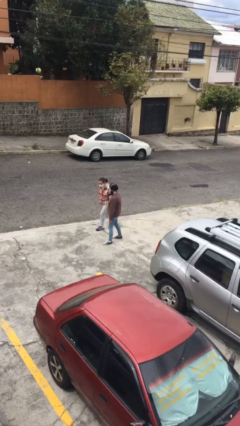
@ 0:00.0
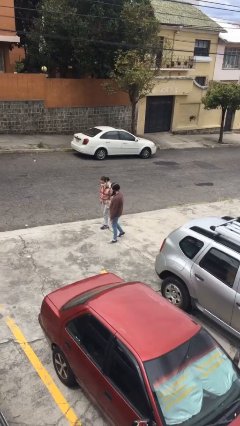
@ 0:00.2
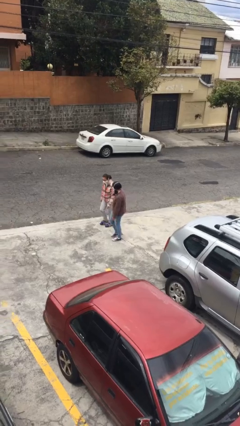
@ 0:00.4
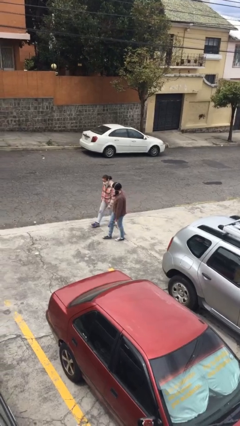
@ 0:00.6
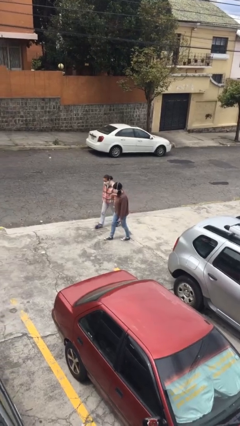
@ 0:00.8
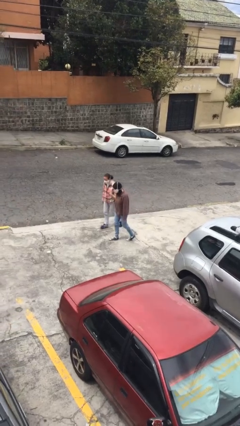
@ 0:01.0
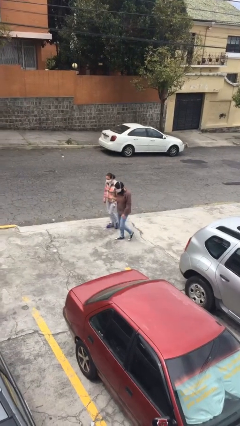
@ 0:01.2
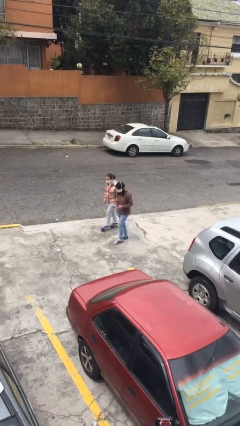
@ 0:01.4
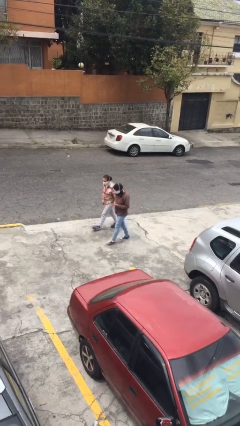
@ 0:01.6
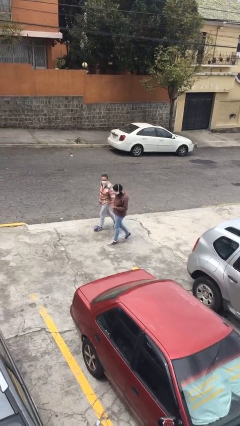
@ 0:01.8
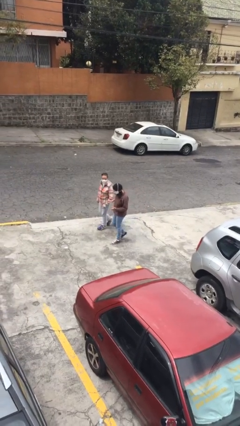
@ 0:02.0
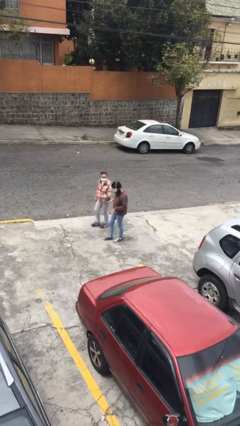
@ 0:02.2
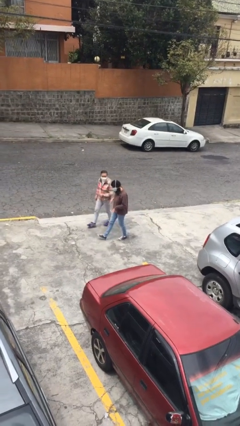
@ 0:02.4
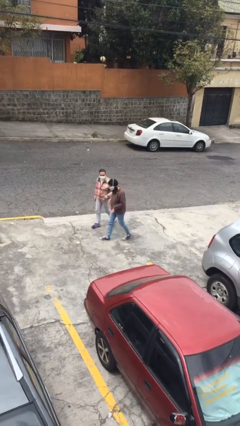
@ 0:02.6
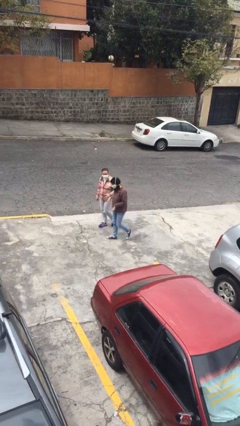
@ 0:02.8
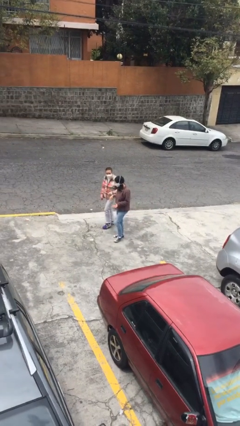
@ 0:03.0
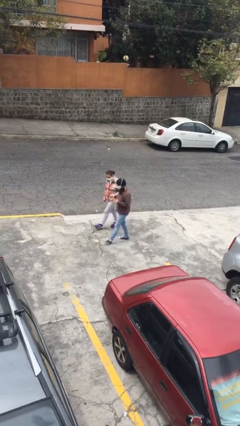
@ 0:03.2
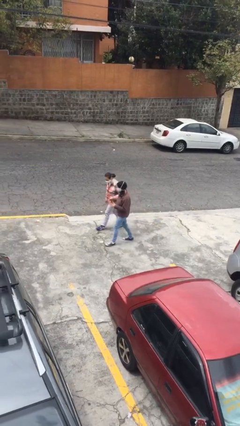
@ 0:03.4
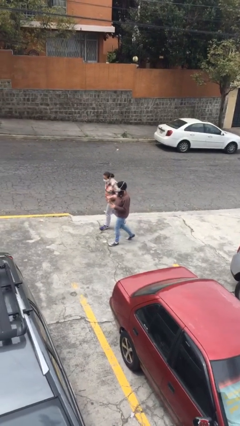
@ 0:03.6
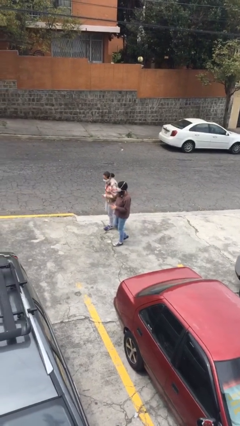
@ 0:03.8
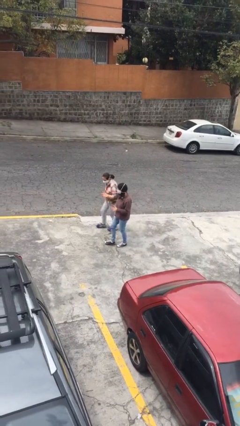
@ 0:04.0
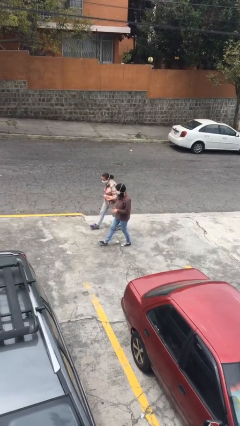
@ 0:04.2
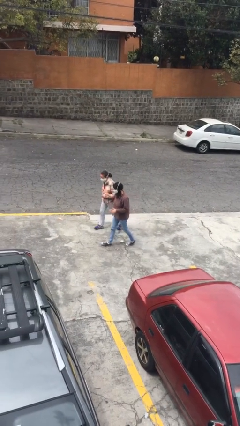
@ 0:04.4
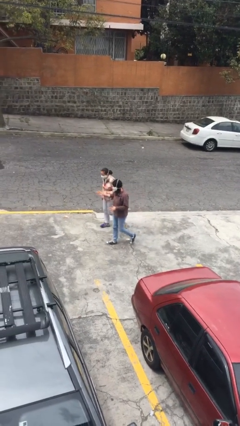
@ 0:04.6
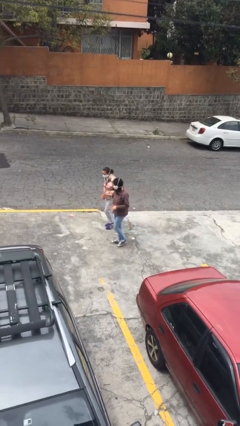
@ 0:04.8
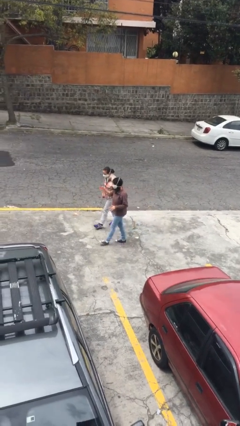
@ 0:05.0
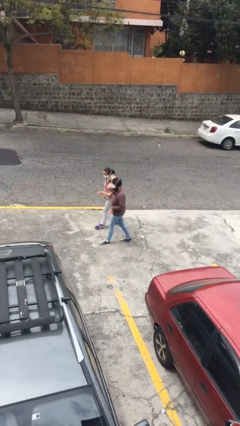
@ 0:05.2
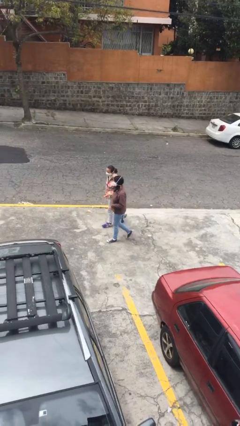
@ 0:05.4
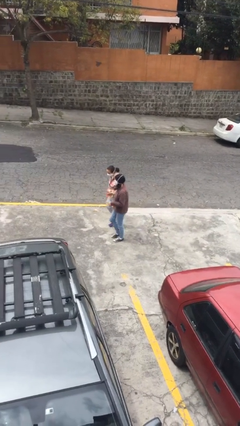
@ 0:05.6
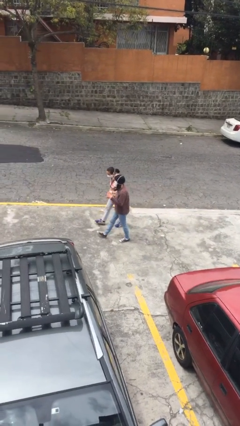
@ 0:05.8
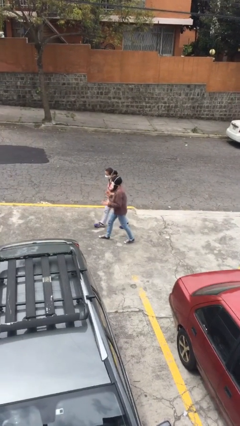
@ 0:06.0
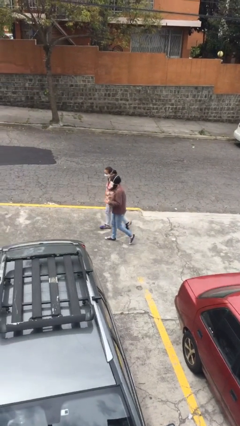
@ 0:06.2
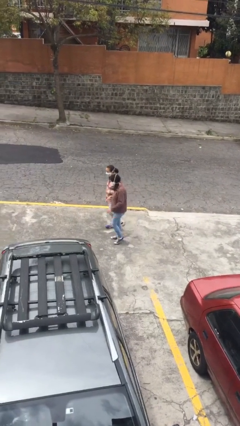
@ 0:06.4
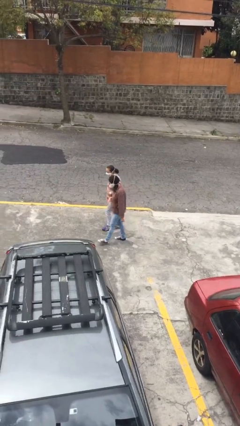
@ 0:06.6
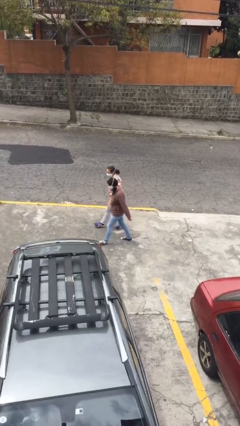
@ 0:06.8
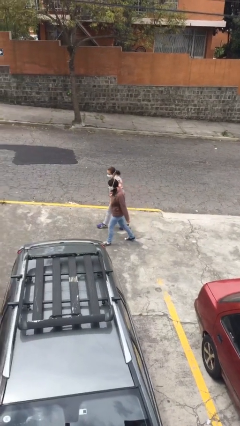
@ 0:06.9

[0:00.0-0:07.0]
person talks to person

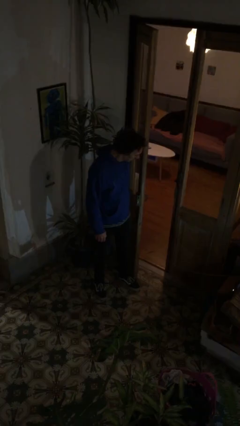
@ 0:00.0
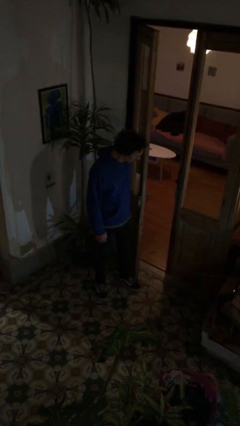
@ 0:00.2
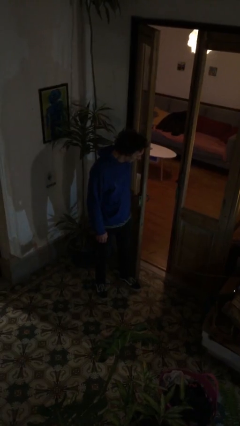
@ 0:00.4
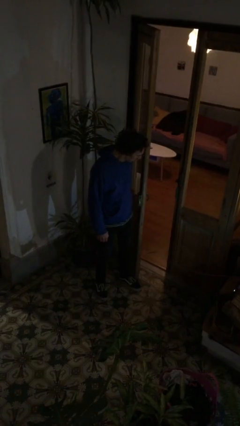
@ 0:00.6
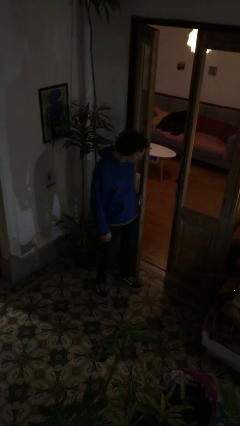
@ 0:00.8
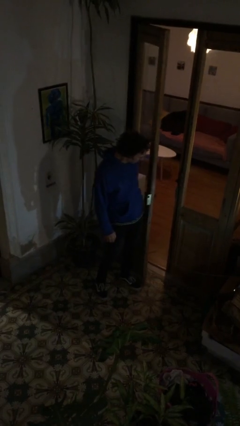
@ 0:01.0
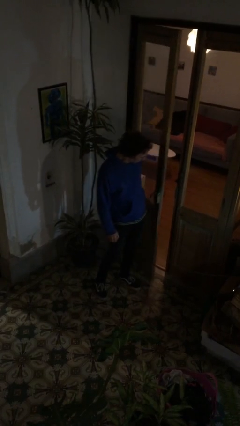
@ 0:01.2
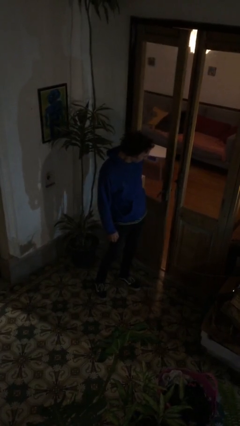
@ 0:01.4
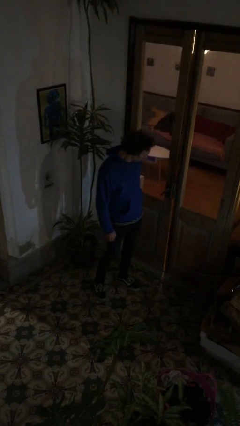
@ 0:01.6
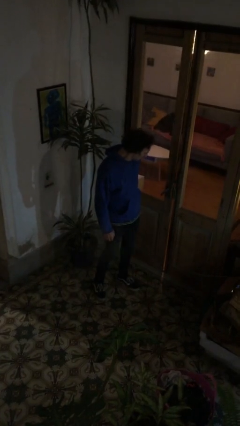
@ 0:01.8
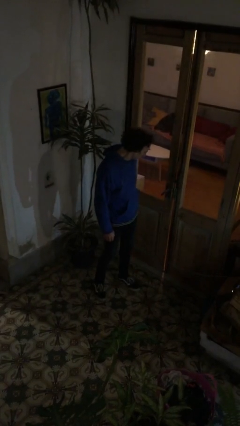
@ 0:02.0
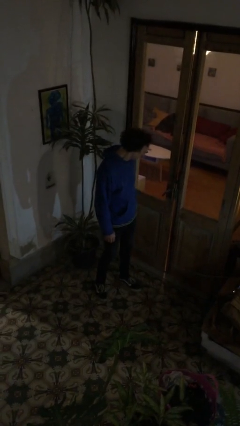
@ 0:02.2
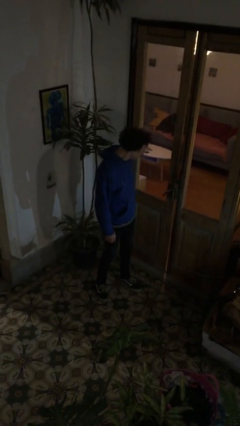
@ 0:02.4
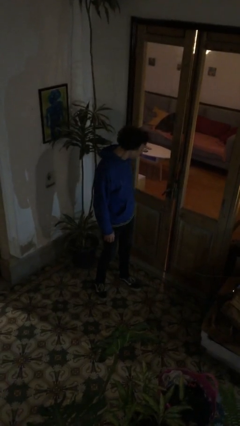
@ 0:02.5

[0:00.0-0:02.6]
person closes door with hip

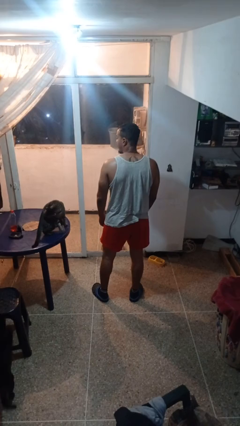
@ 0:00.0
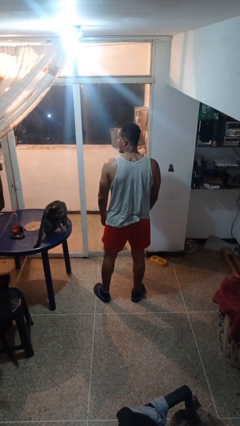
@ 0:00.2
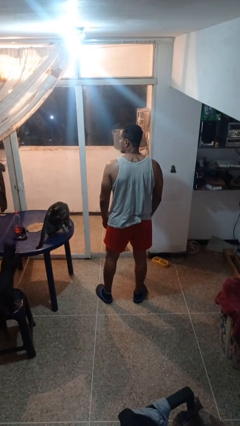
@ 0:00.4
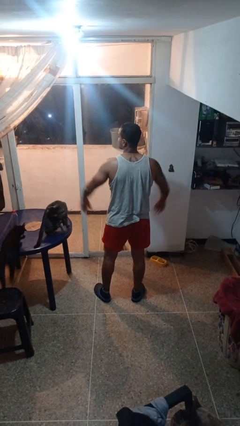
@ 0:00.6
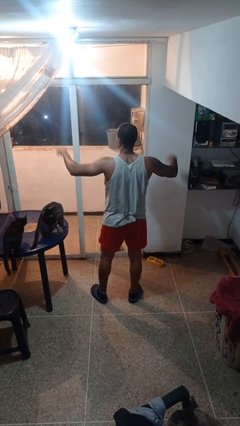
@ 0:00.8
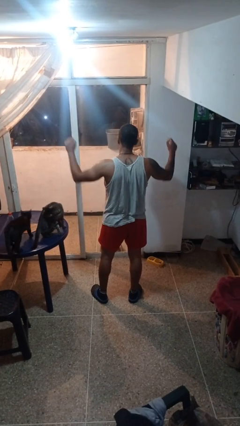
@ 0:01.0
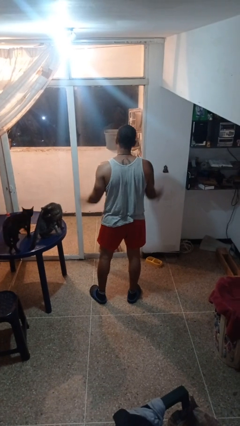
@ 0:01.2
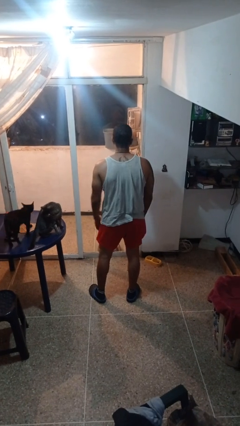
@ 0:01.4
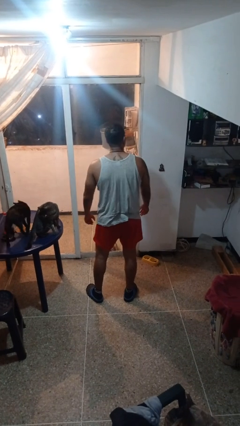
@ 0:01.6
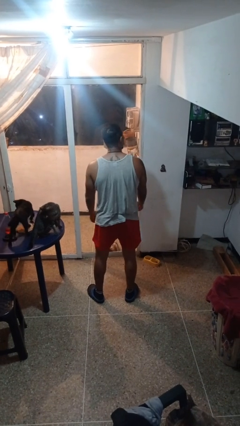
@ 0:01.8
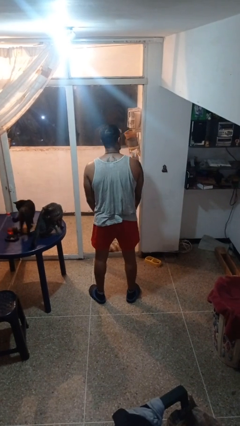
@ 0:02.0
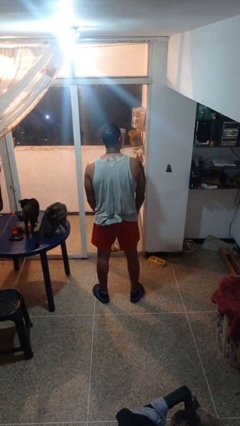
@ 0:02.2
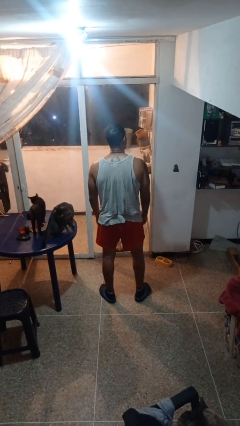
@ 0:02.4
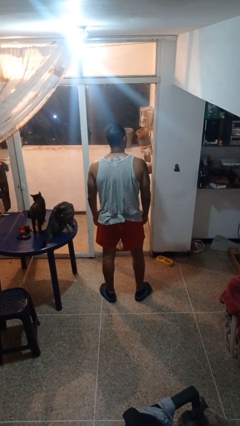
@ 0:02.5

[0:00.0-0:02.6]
person slaps hands on thighs

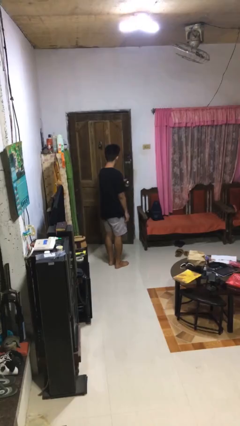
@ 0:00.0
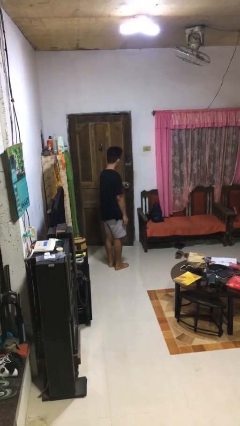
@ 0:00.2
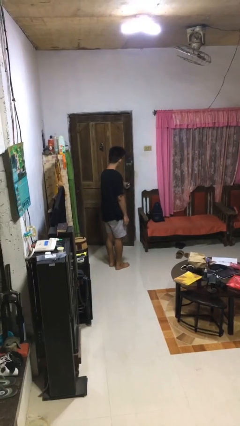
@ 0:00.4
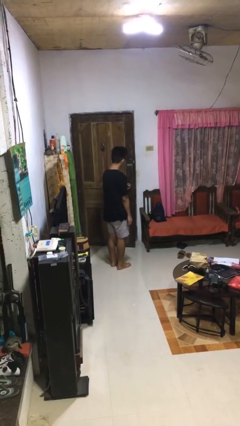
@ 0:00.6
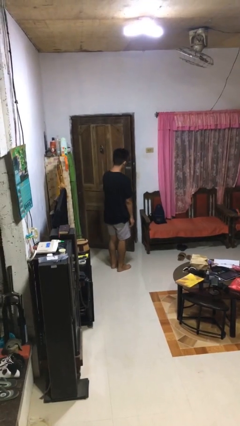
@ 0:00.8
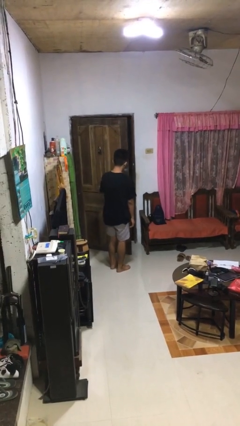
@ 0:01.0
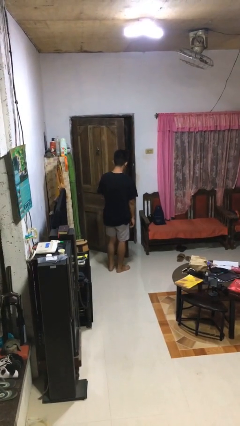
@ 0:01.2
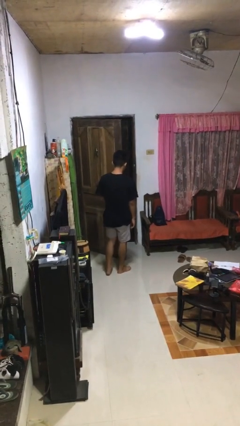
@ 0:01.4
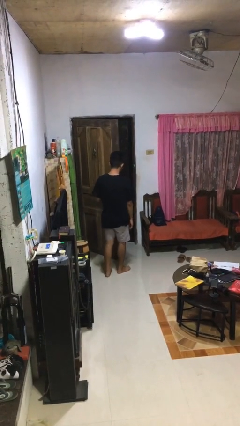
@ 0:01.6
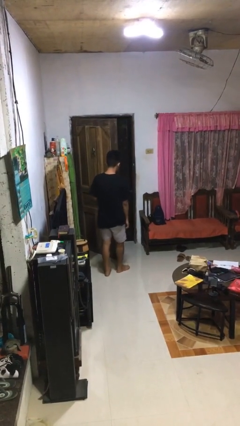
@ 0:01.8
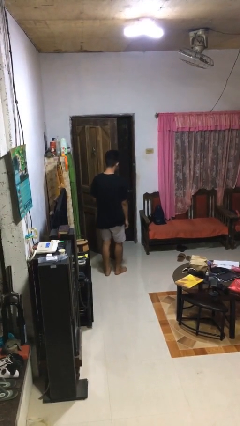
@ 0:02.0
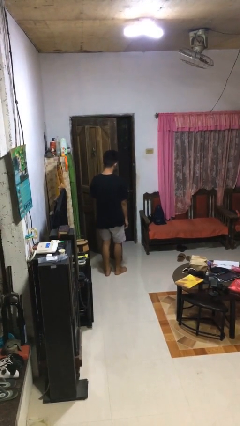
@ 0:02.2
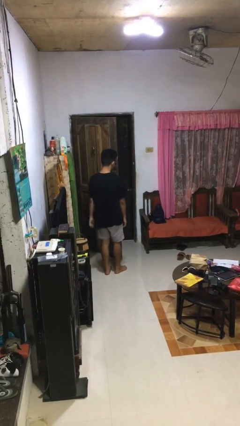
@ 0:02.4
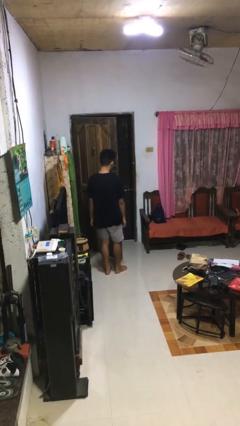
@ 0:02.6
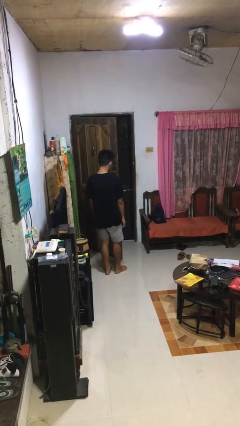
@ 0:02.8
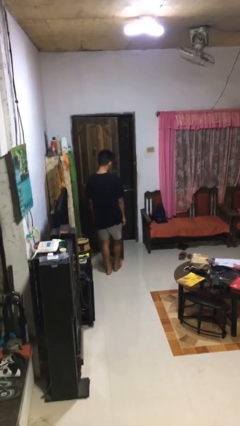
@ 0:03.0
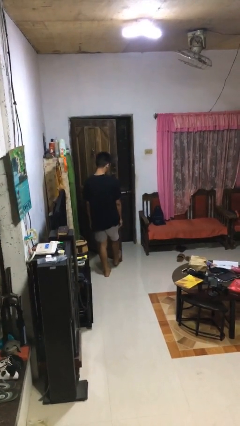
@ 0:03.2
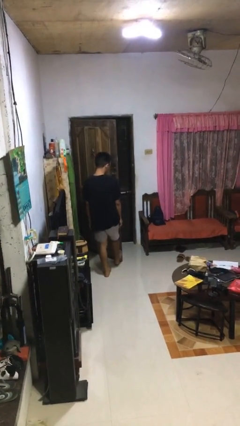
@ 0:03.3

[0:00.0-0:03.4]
person opens facility door

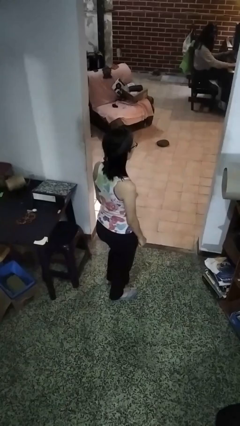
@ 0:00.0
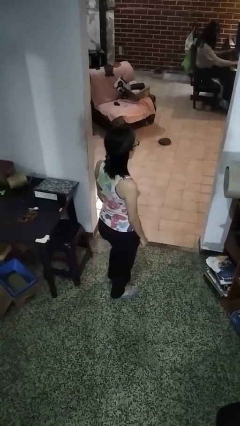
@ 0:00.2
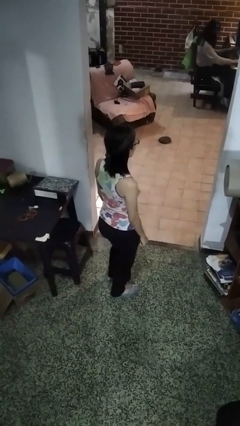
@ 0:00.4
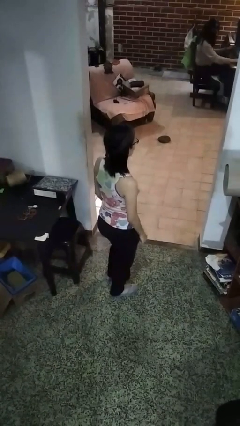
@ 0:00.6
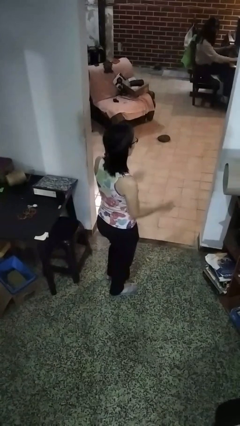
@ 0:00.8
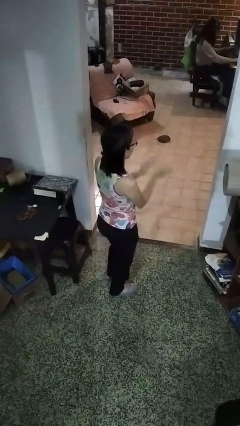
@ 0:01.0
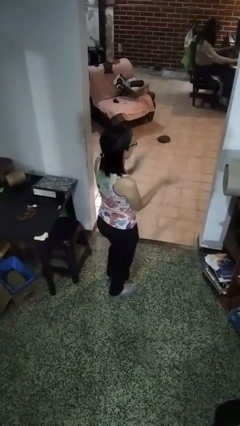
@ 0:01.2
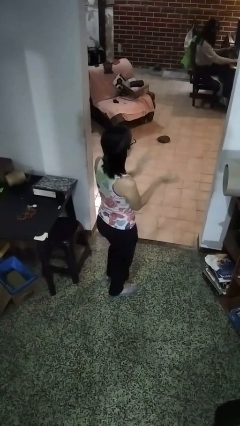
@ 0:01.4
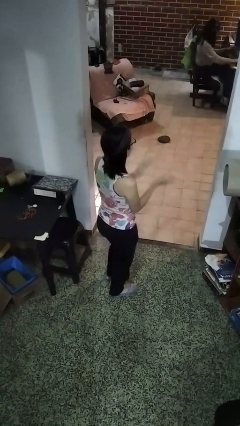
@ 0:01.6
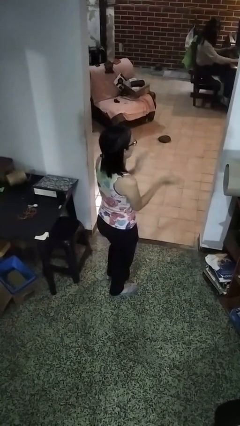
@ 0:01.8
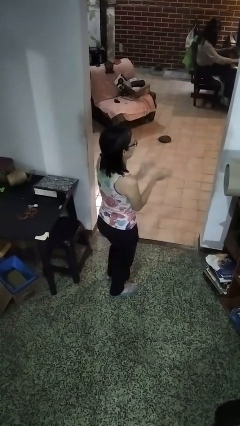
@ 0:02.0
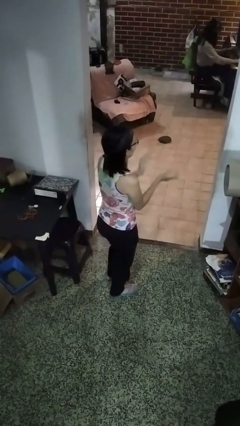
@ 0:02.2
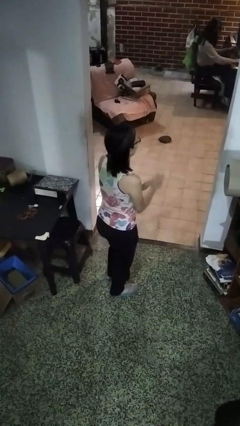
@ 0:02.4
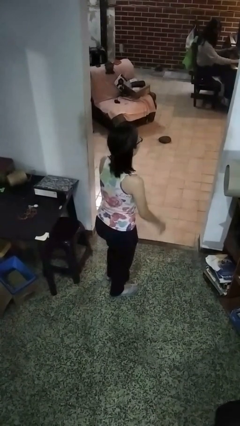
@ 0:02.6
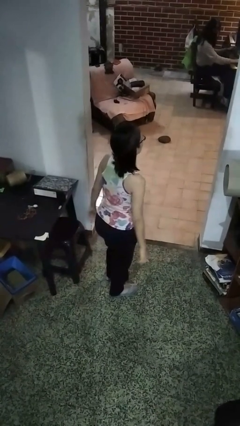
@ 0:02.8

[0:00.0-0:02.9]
person claps hands
